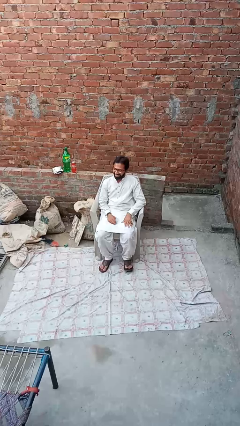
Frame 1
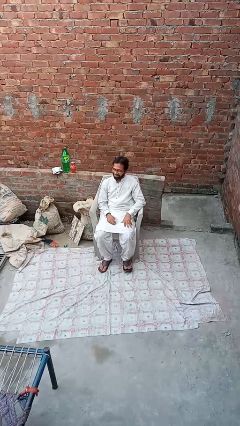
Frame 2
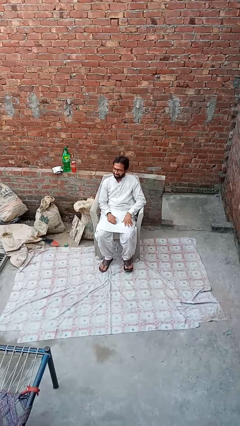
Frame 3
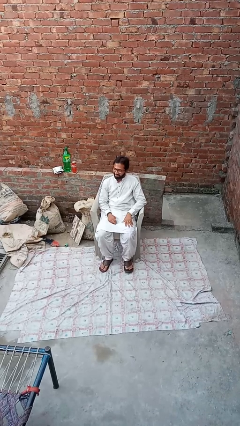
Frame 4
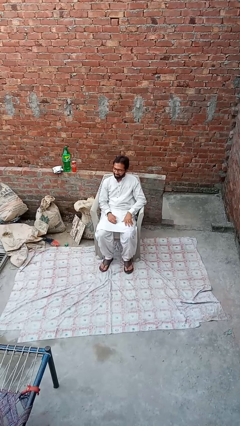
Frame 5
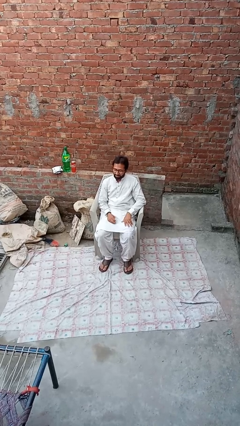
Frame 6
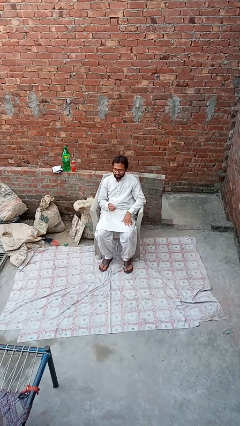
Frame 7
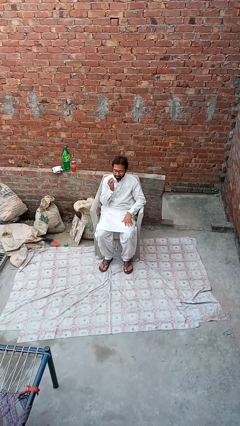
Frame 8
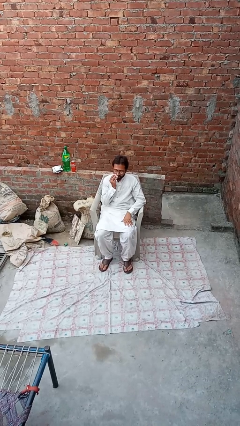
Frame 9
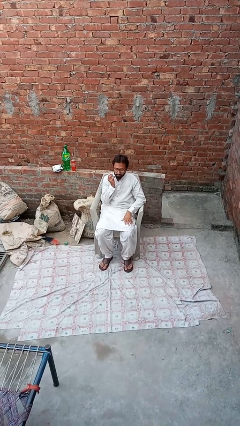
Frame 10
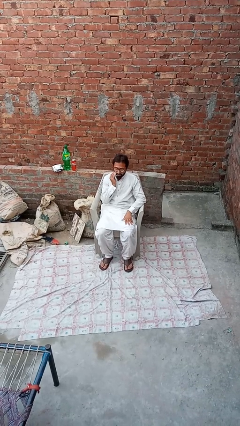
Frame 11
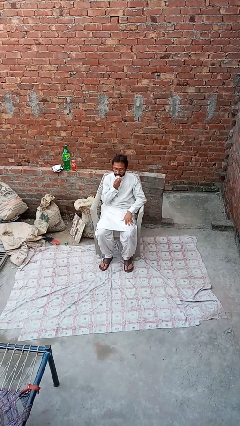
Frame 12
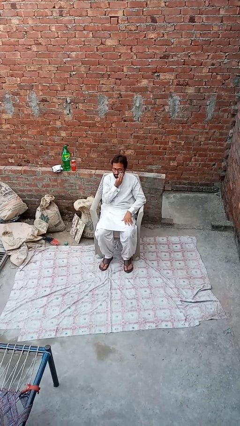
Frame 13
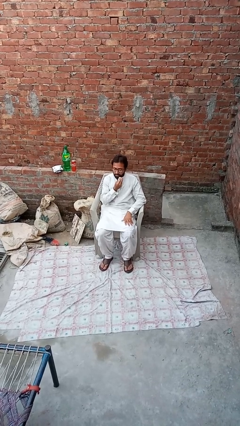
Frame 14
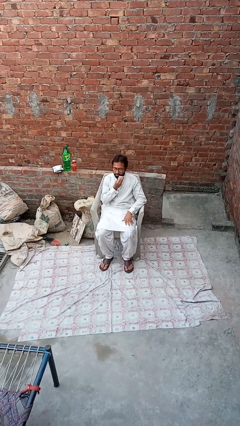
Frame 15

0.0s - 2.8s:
person wipes mouth with napkin

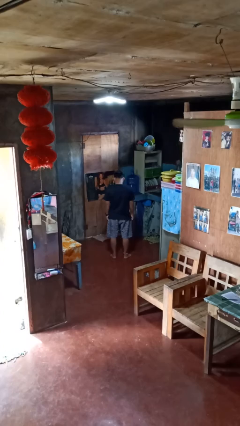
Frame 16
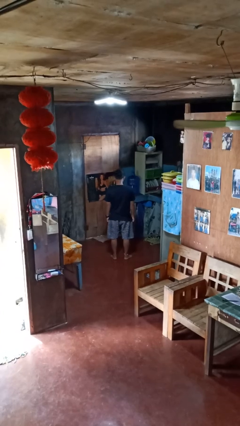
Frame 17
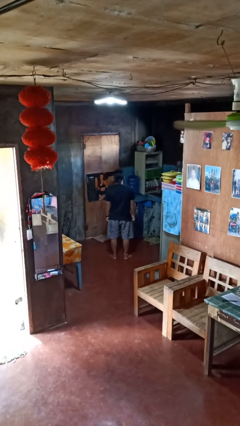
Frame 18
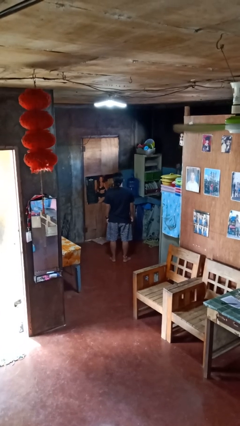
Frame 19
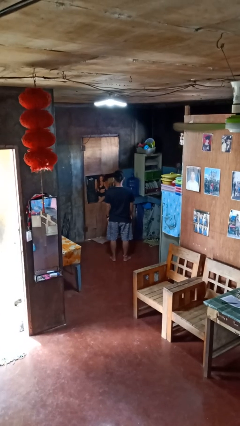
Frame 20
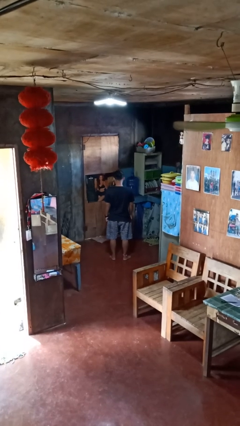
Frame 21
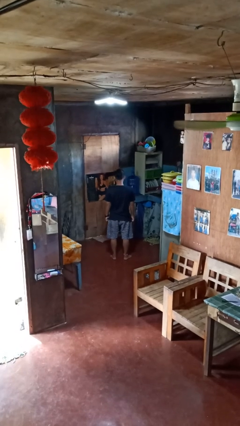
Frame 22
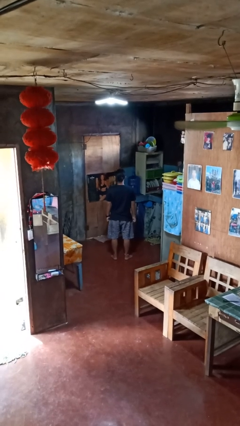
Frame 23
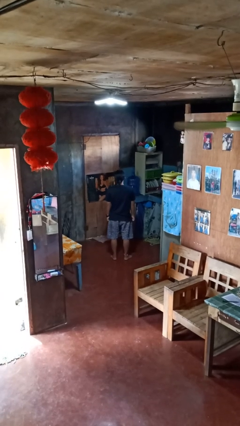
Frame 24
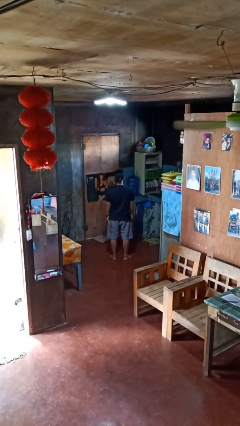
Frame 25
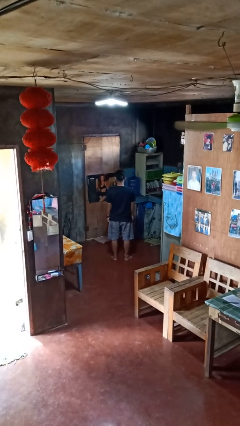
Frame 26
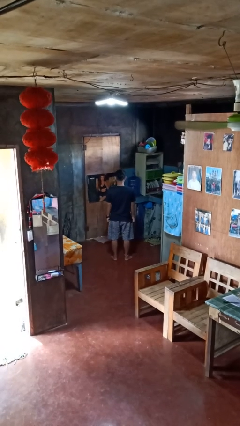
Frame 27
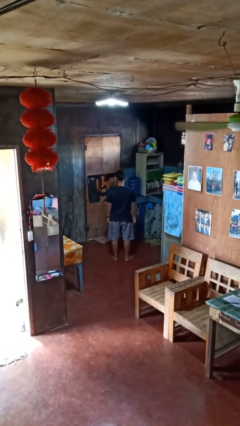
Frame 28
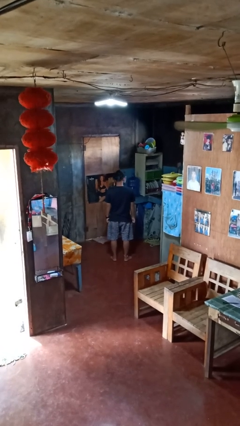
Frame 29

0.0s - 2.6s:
person nods head

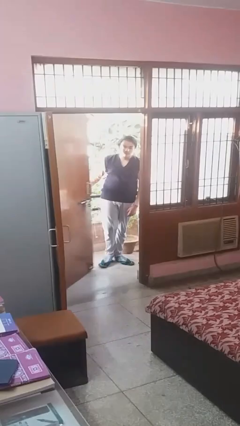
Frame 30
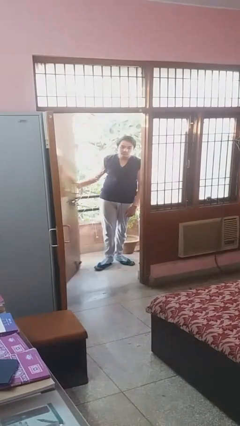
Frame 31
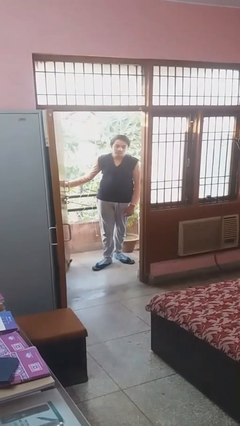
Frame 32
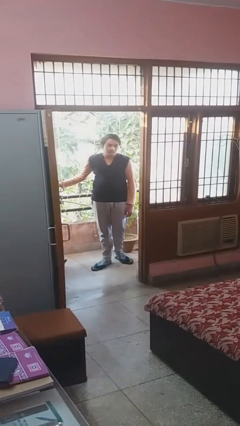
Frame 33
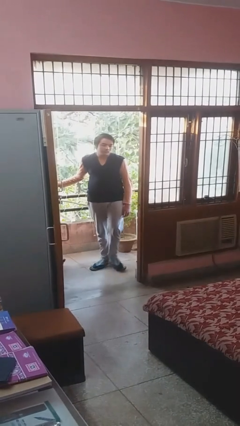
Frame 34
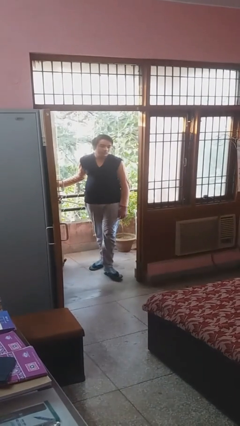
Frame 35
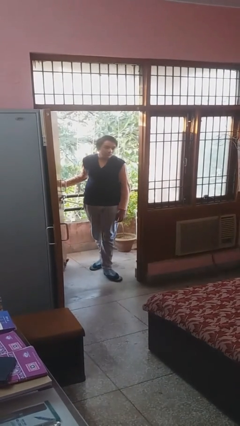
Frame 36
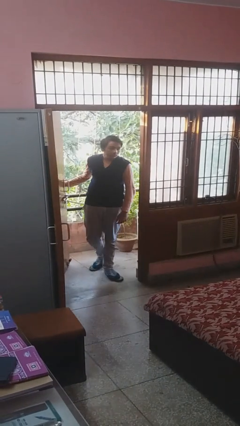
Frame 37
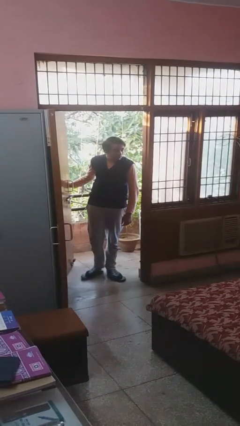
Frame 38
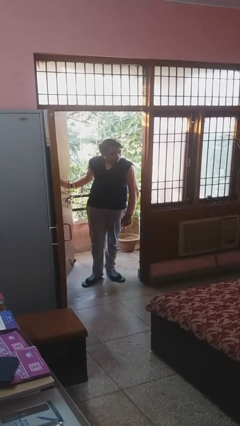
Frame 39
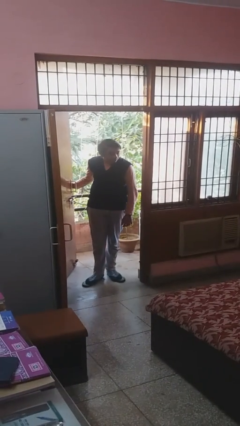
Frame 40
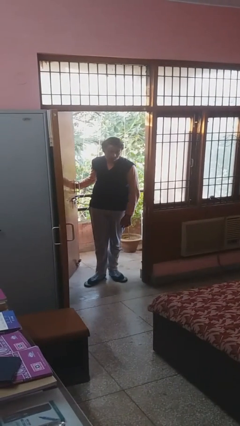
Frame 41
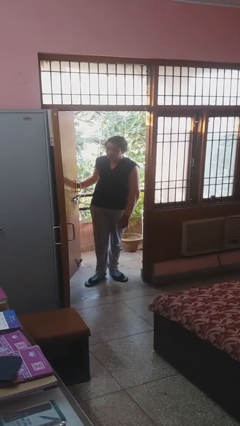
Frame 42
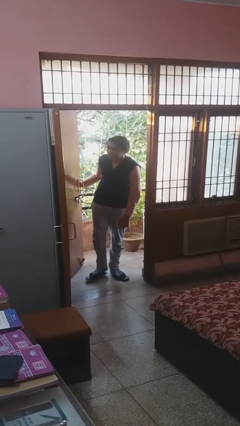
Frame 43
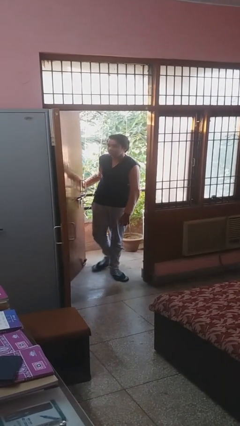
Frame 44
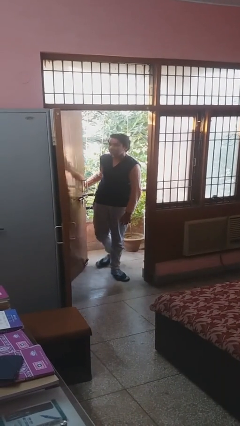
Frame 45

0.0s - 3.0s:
person opens facility door

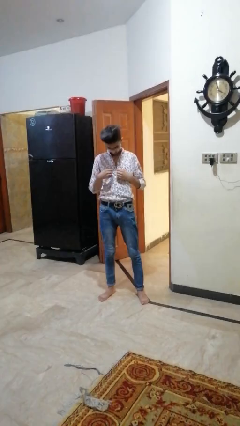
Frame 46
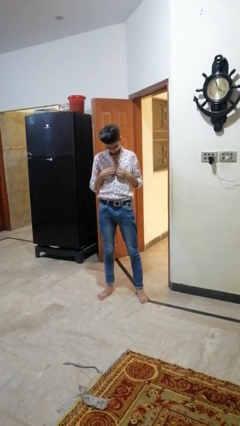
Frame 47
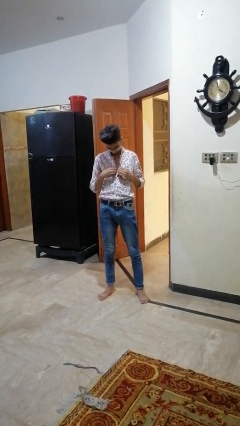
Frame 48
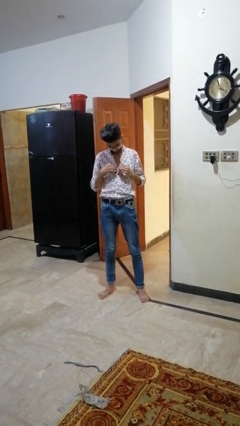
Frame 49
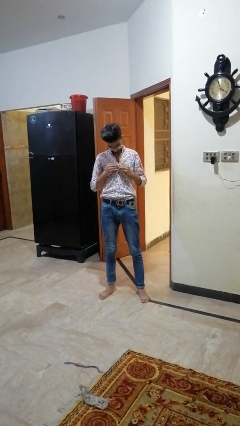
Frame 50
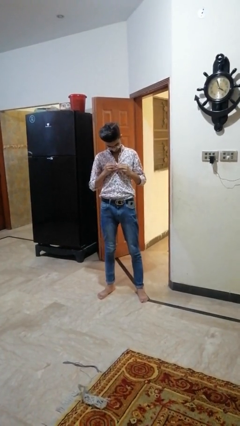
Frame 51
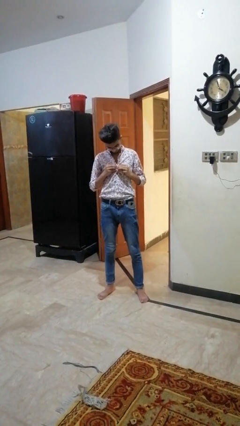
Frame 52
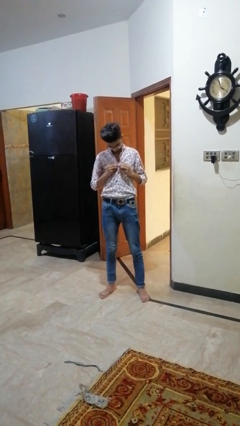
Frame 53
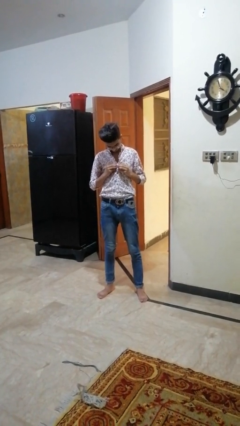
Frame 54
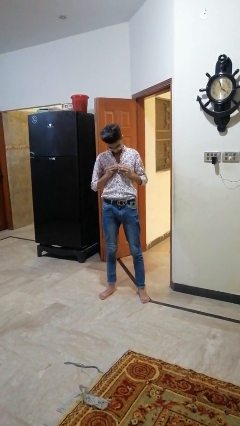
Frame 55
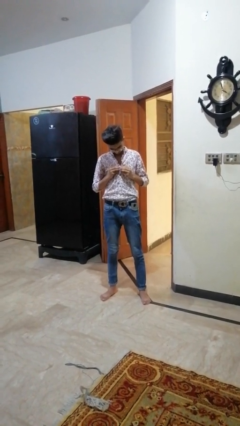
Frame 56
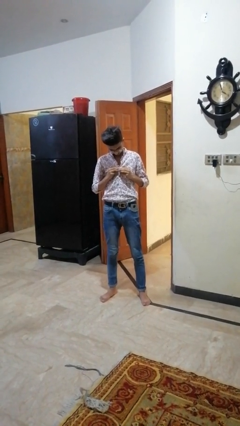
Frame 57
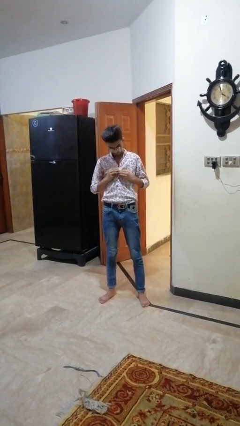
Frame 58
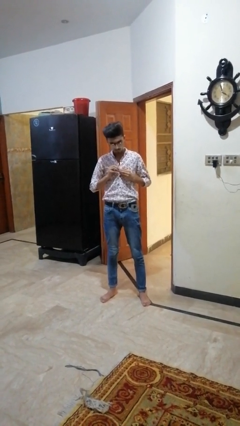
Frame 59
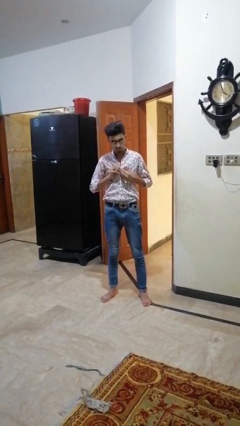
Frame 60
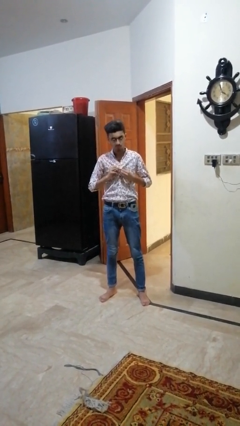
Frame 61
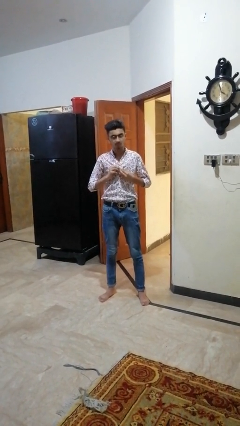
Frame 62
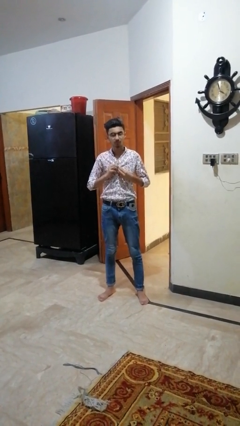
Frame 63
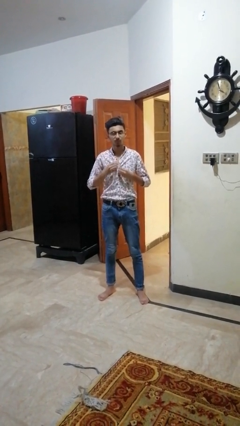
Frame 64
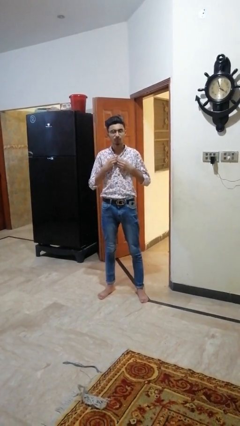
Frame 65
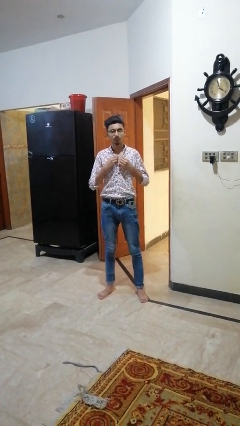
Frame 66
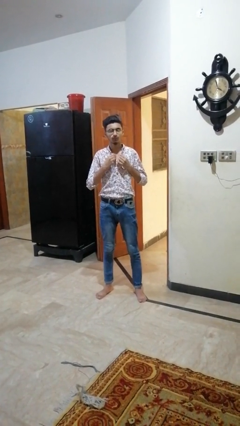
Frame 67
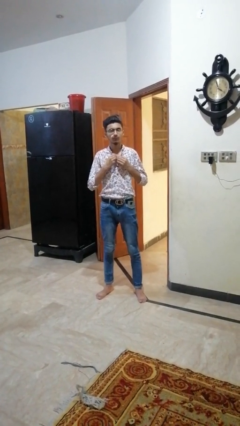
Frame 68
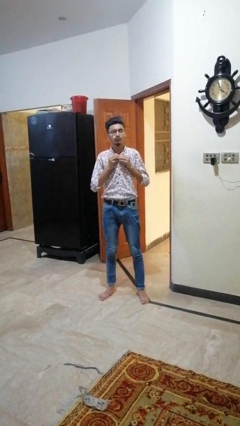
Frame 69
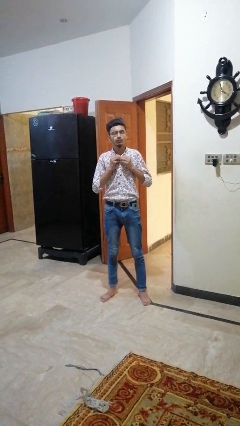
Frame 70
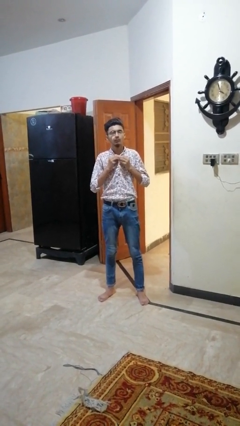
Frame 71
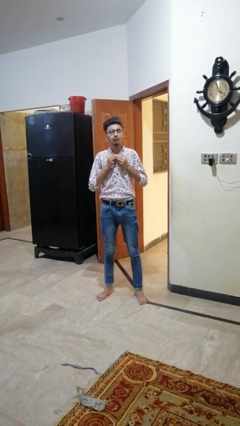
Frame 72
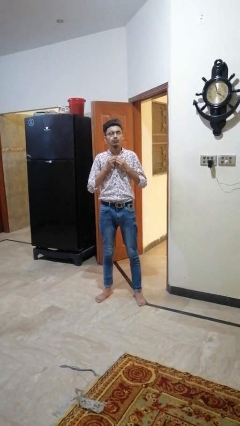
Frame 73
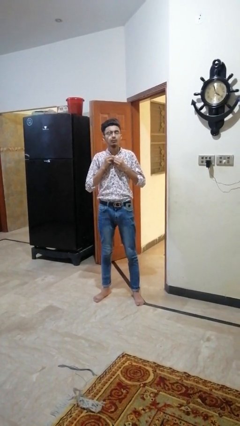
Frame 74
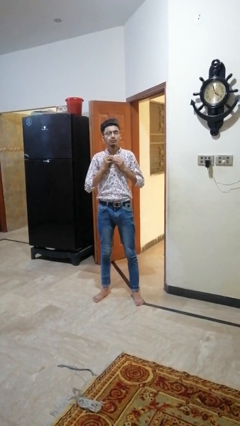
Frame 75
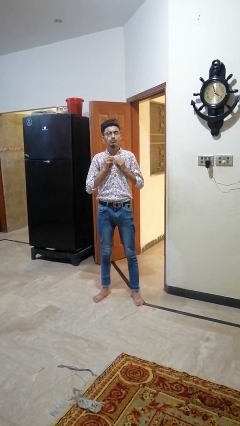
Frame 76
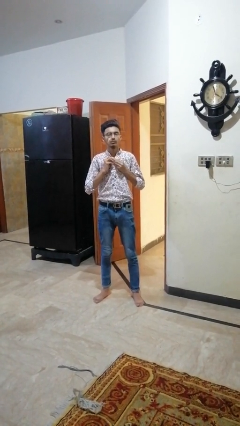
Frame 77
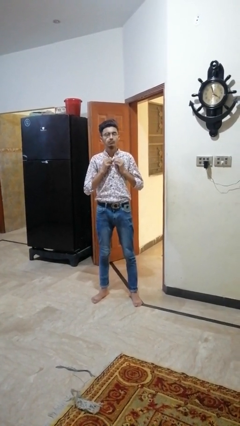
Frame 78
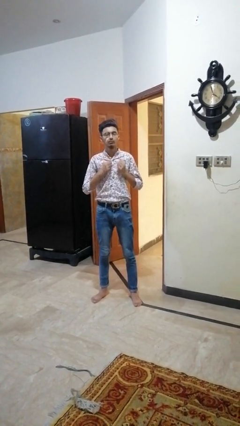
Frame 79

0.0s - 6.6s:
person buttons shirt

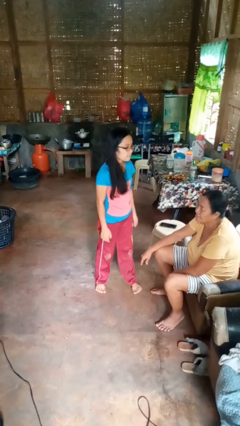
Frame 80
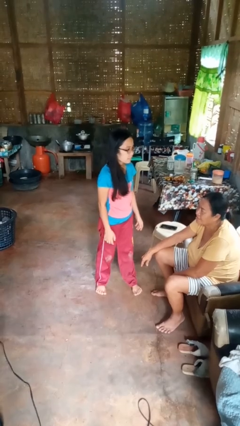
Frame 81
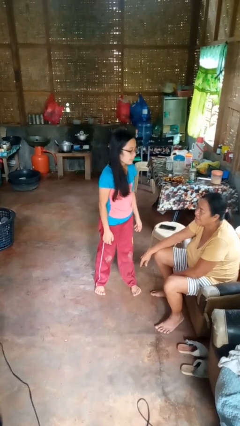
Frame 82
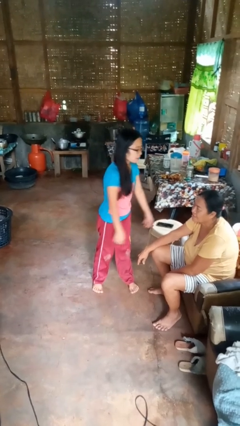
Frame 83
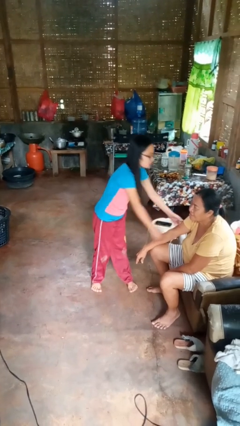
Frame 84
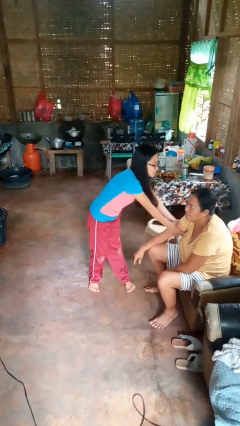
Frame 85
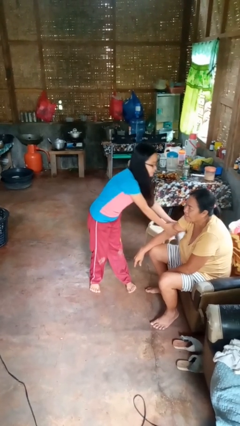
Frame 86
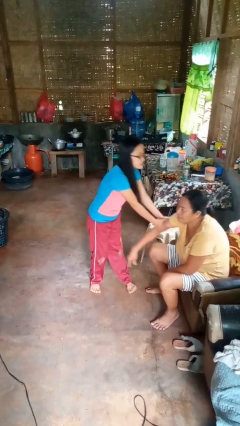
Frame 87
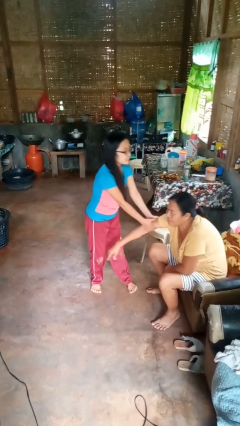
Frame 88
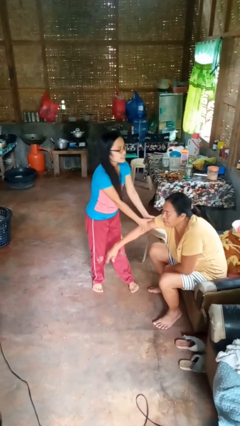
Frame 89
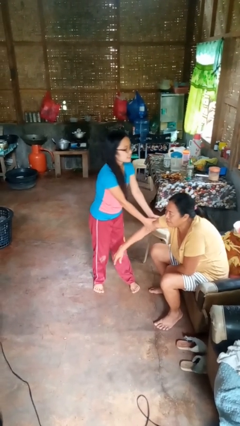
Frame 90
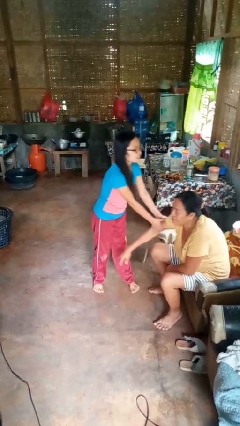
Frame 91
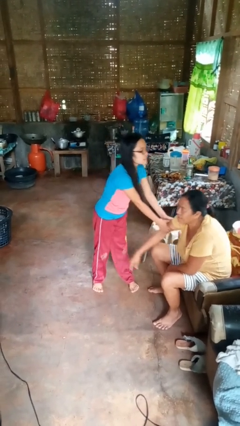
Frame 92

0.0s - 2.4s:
person grabs person by bicep
